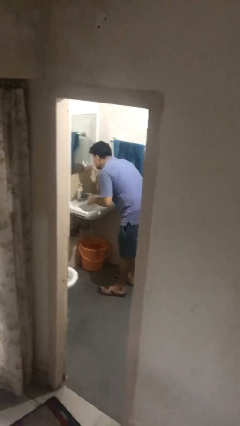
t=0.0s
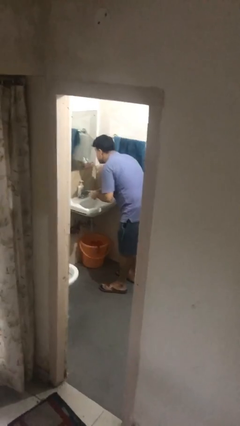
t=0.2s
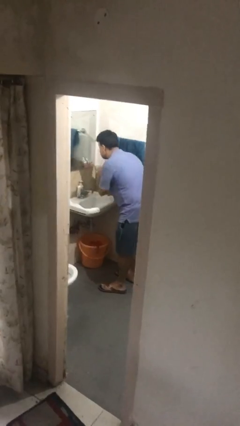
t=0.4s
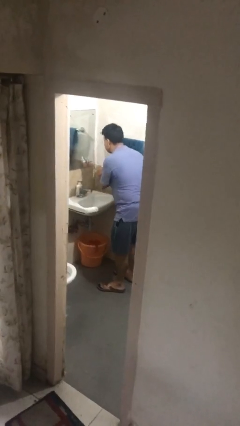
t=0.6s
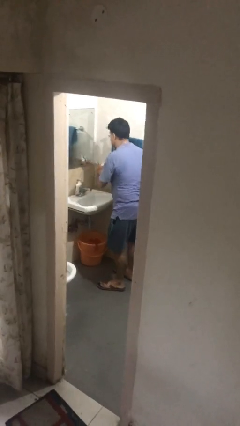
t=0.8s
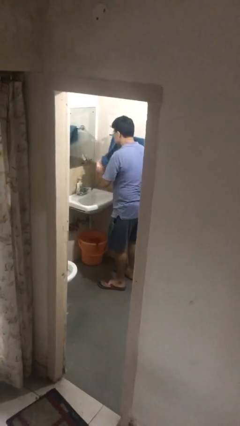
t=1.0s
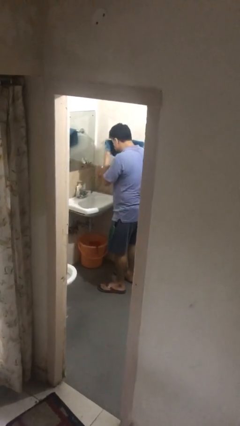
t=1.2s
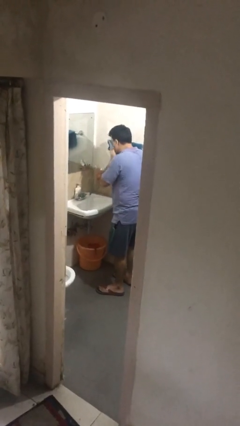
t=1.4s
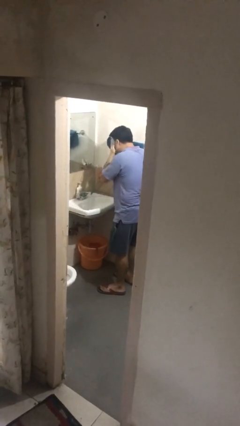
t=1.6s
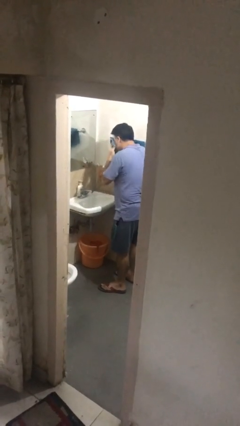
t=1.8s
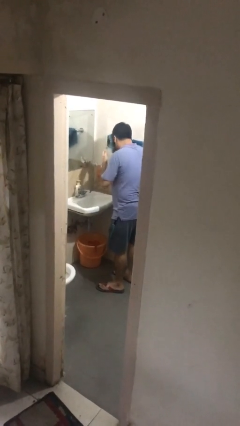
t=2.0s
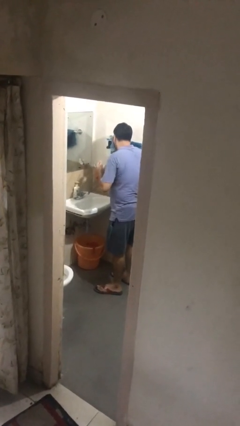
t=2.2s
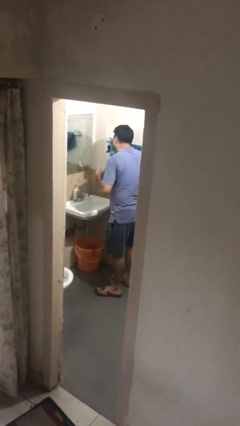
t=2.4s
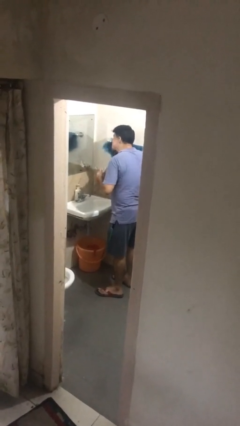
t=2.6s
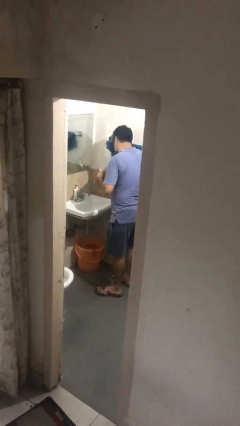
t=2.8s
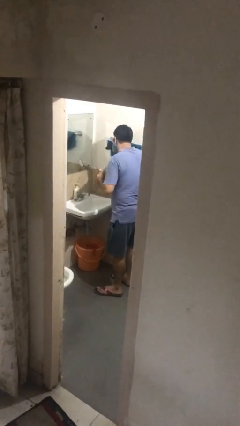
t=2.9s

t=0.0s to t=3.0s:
person dries face with towel

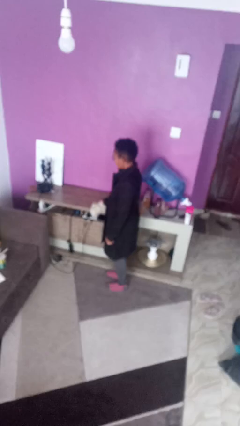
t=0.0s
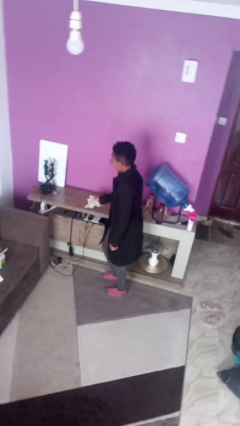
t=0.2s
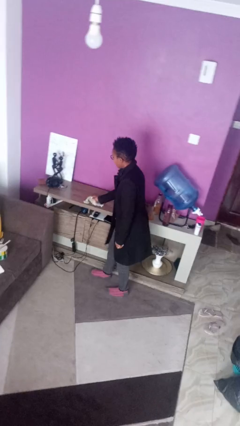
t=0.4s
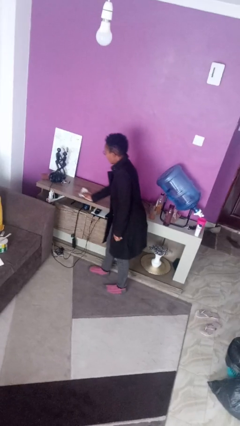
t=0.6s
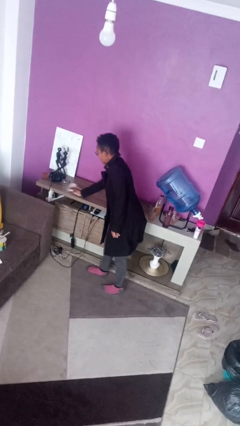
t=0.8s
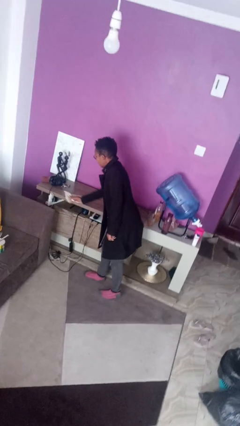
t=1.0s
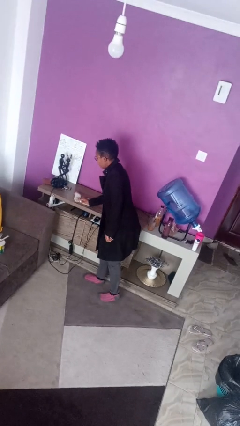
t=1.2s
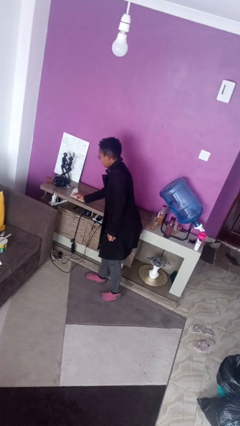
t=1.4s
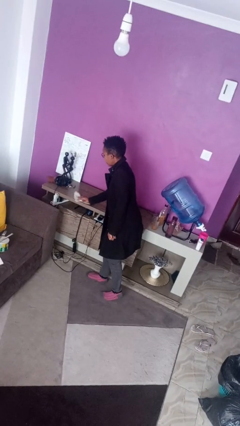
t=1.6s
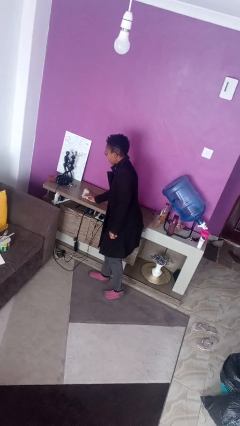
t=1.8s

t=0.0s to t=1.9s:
person cleans table with rag

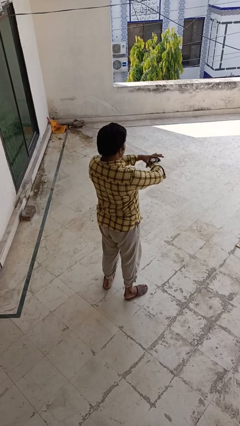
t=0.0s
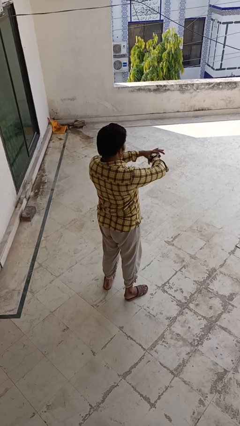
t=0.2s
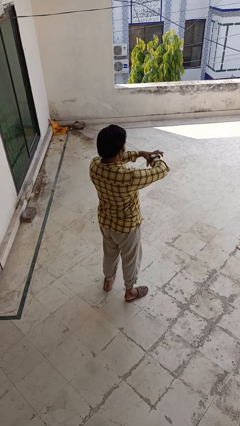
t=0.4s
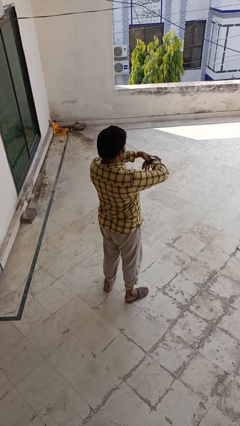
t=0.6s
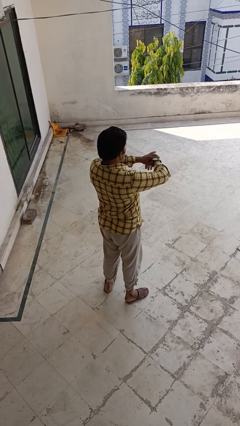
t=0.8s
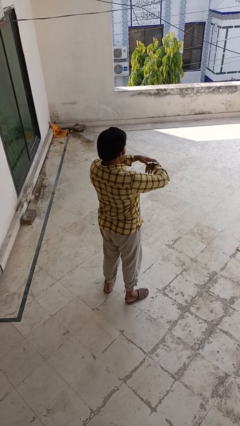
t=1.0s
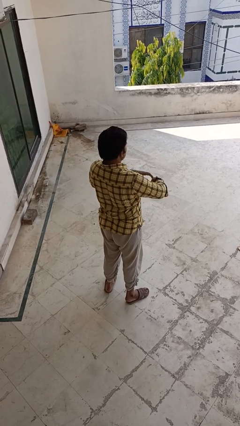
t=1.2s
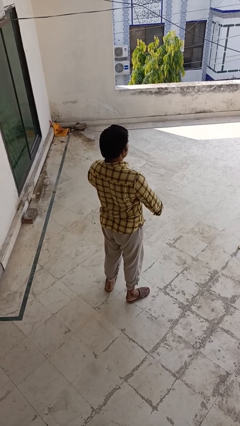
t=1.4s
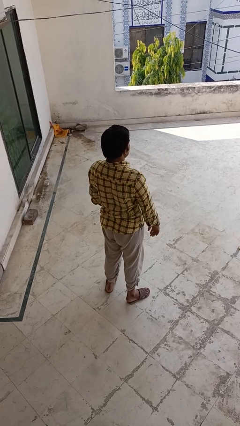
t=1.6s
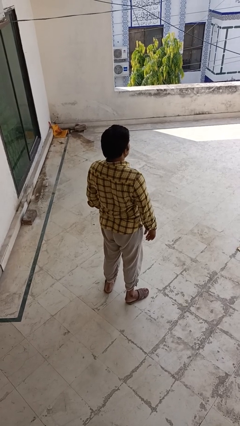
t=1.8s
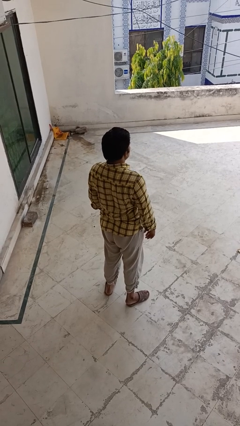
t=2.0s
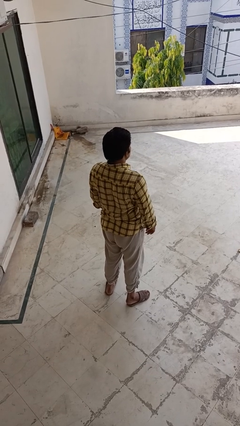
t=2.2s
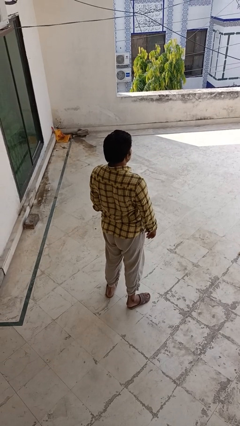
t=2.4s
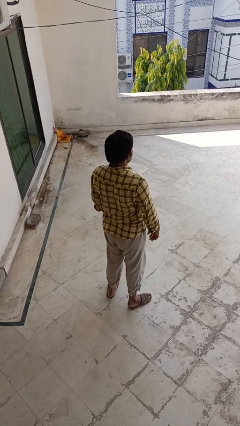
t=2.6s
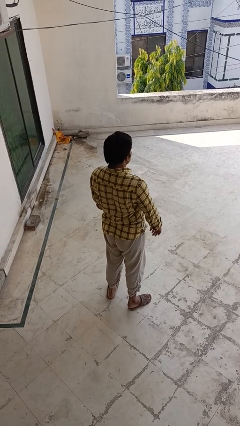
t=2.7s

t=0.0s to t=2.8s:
person puts on wristwatch

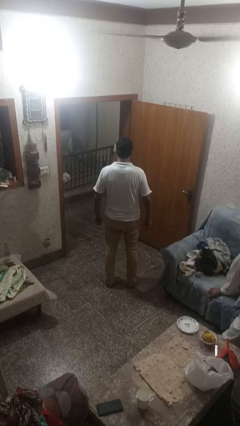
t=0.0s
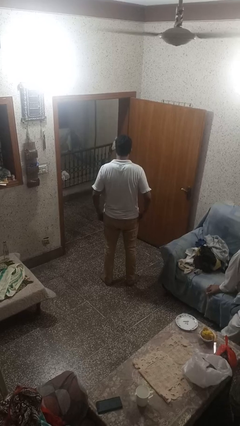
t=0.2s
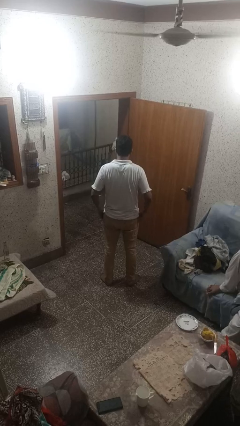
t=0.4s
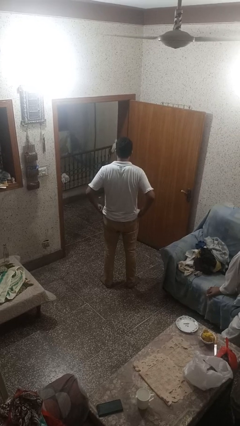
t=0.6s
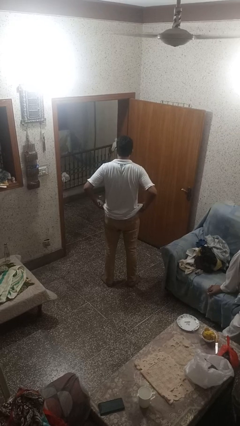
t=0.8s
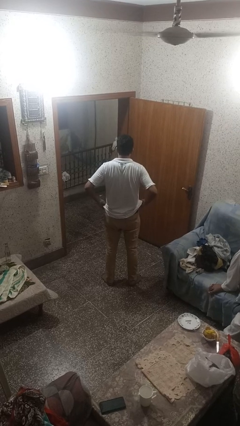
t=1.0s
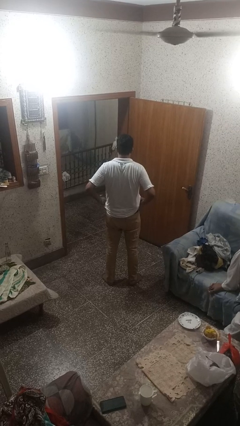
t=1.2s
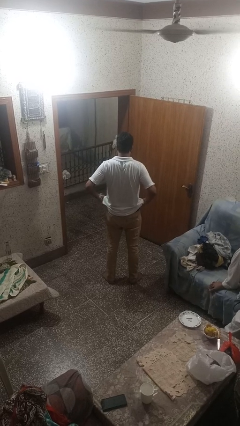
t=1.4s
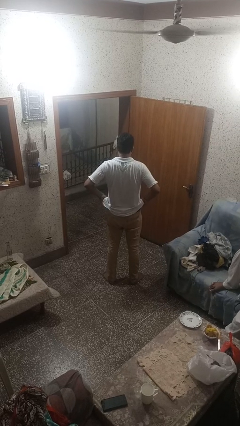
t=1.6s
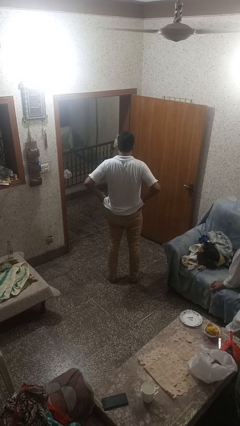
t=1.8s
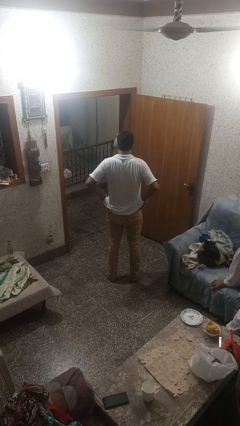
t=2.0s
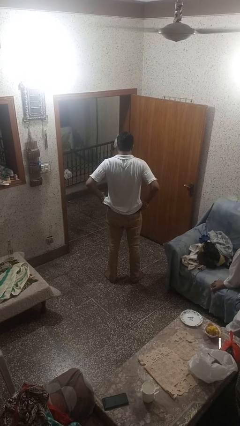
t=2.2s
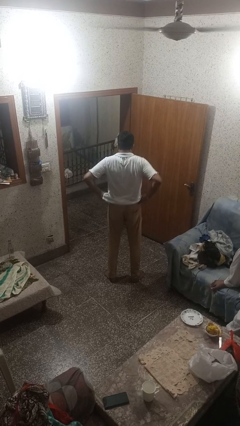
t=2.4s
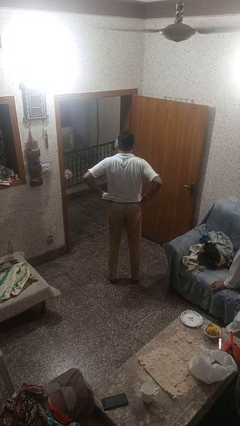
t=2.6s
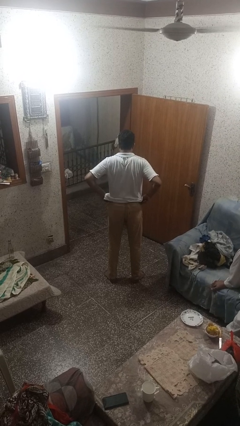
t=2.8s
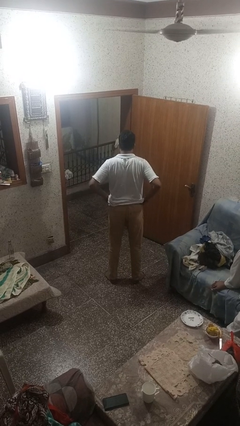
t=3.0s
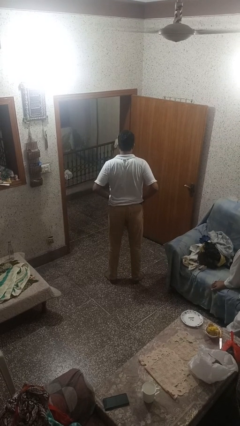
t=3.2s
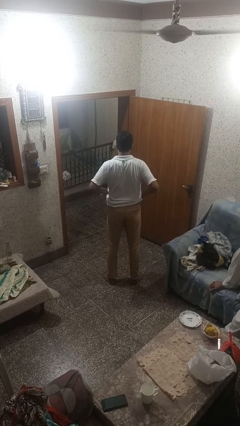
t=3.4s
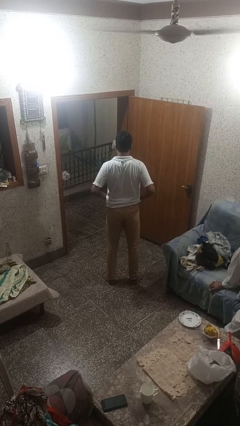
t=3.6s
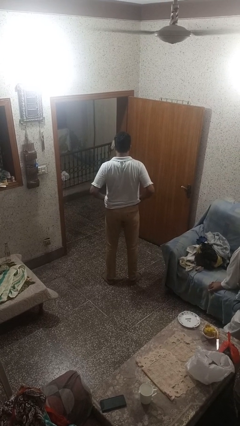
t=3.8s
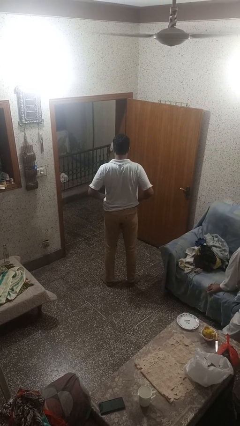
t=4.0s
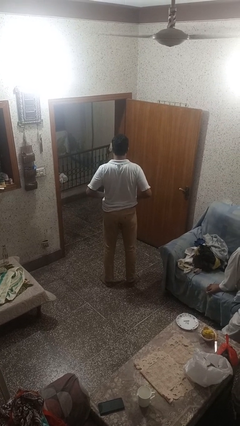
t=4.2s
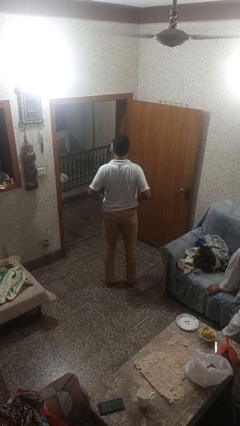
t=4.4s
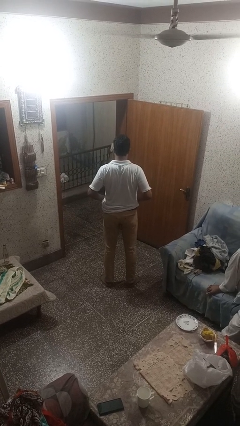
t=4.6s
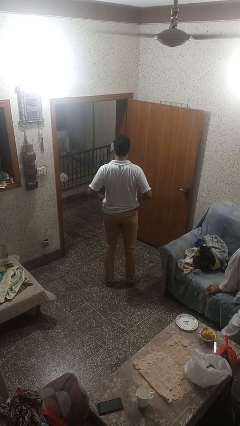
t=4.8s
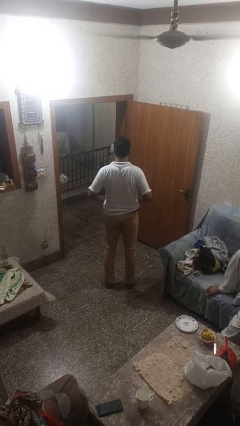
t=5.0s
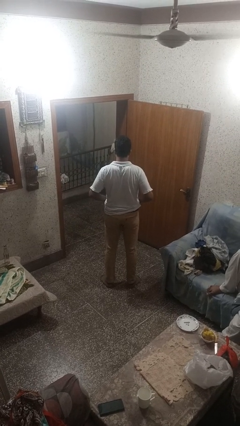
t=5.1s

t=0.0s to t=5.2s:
person hikes up pants

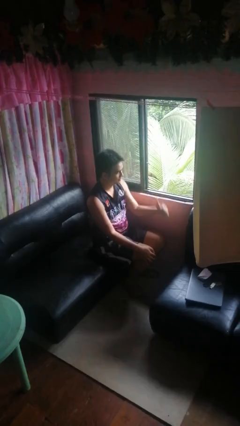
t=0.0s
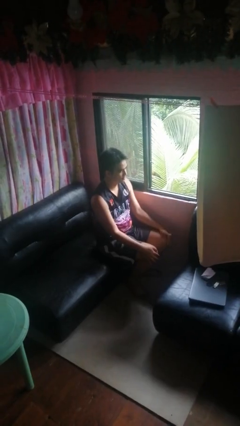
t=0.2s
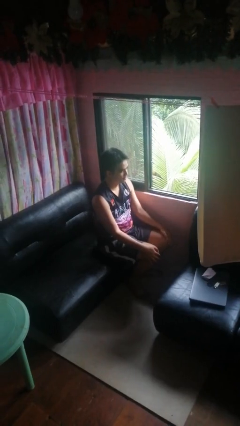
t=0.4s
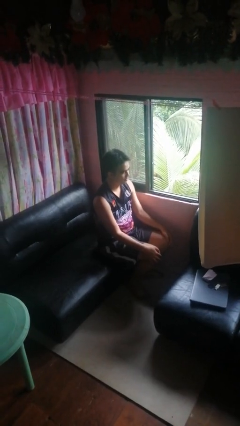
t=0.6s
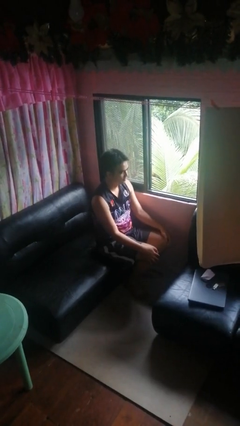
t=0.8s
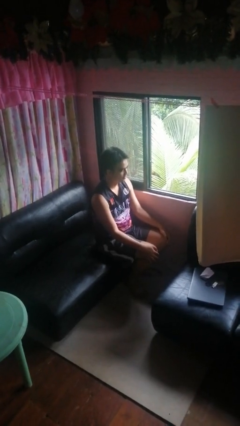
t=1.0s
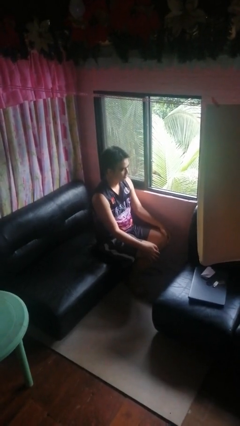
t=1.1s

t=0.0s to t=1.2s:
person gestures behind me

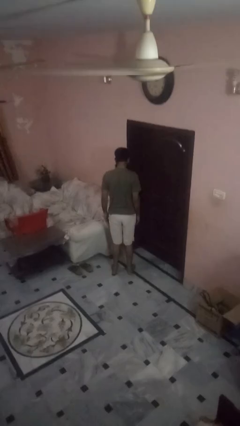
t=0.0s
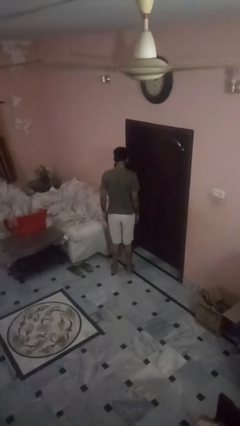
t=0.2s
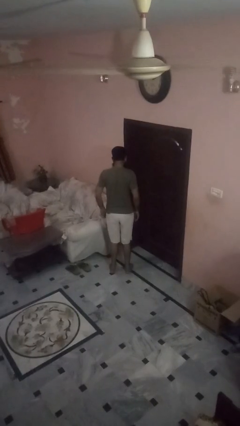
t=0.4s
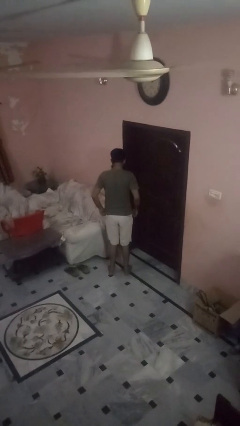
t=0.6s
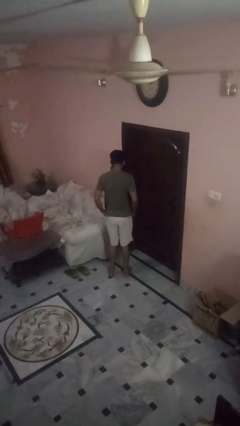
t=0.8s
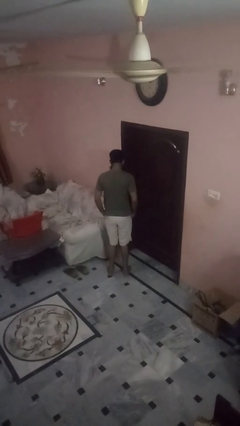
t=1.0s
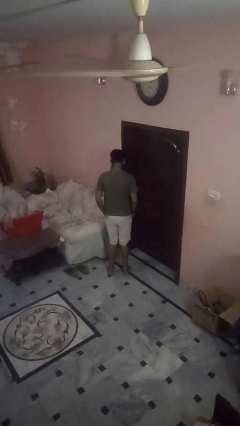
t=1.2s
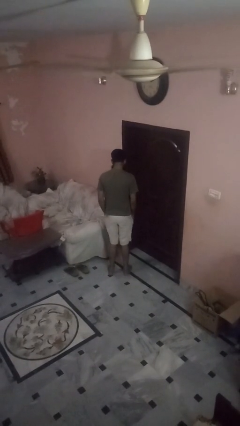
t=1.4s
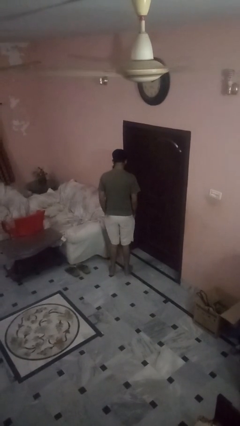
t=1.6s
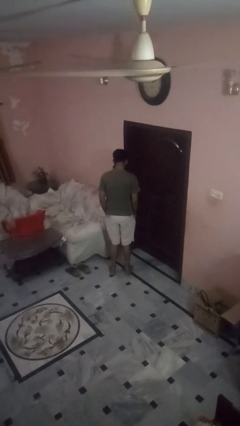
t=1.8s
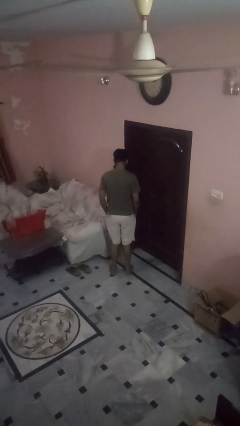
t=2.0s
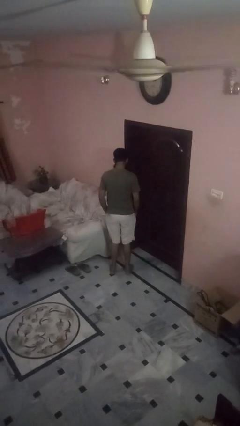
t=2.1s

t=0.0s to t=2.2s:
person puts hands in back pockets

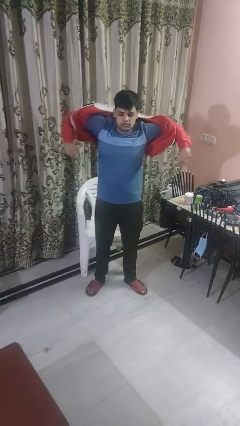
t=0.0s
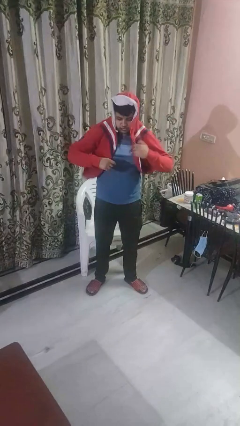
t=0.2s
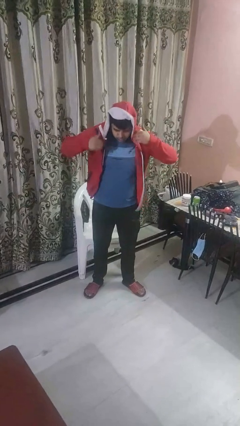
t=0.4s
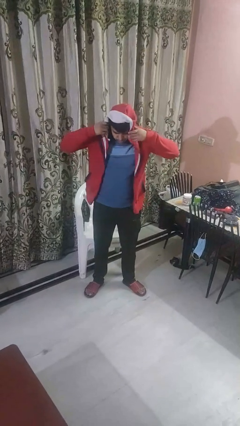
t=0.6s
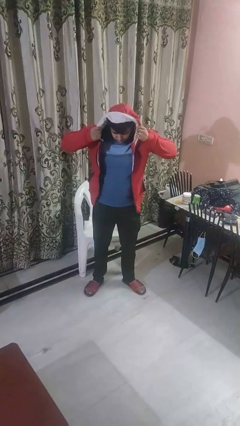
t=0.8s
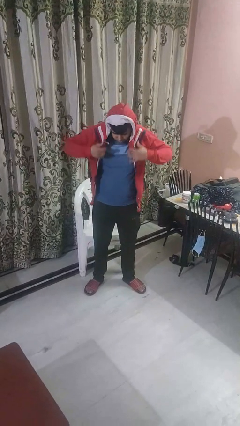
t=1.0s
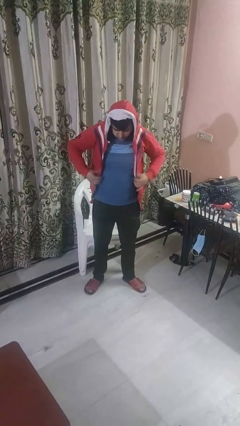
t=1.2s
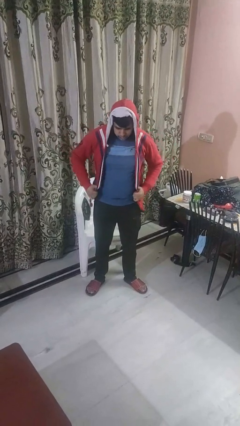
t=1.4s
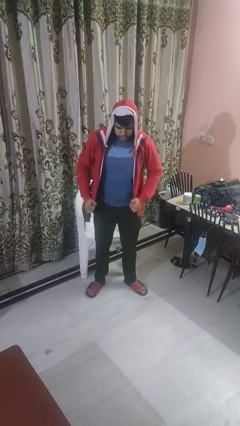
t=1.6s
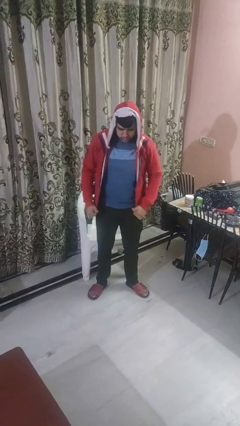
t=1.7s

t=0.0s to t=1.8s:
person puts on hoodie
